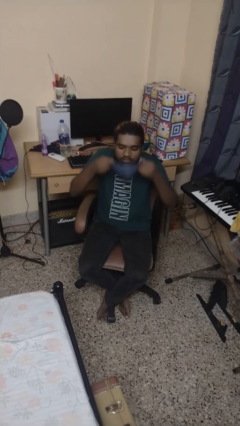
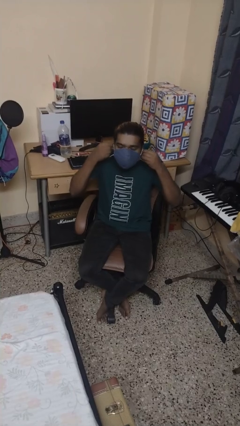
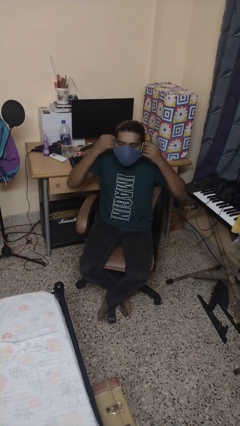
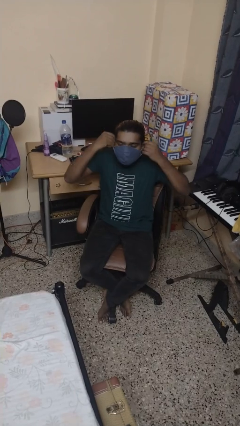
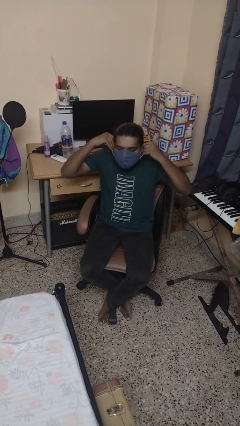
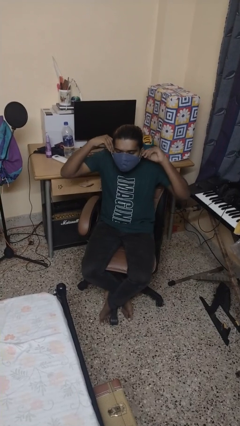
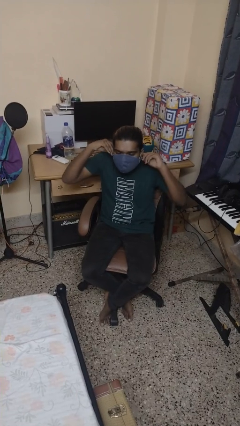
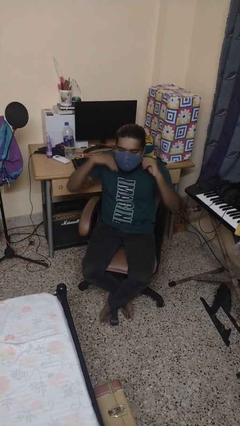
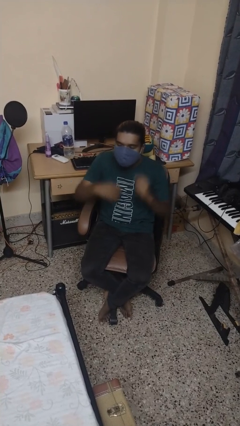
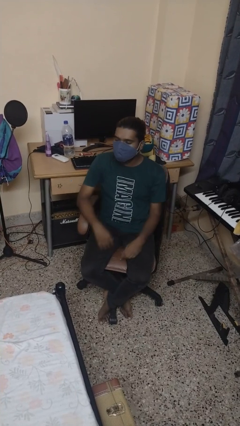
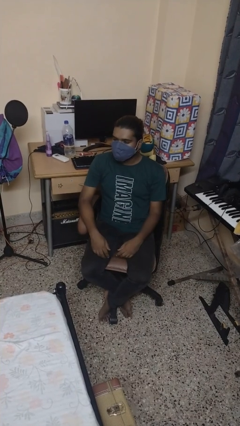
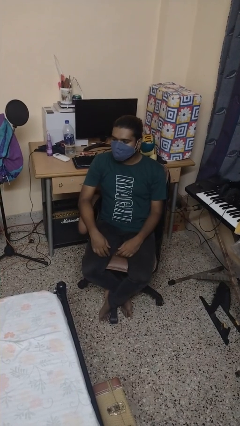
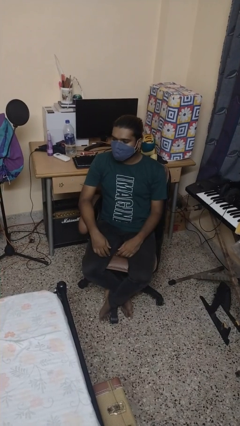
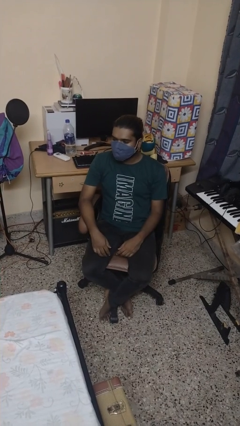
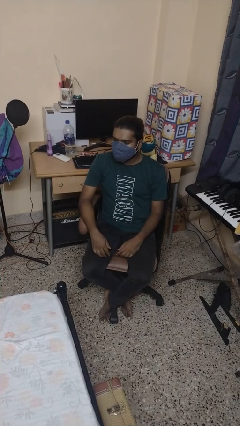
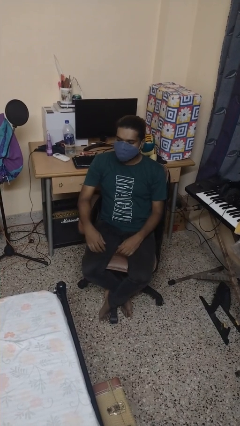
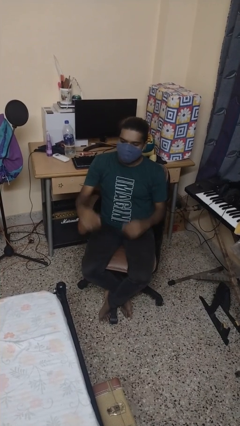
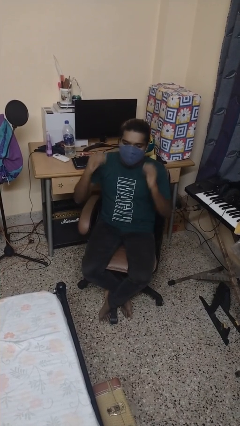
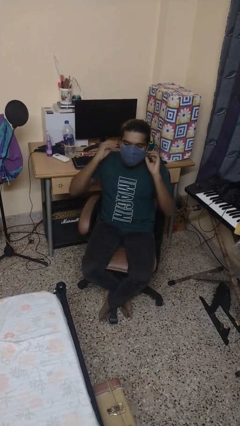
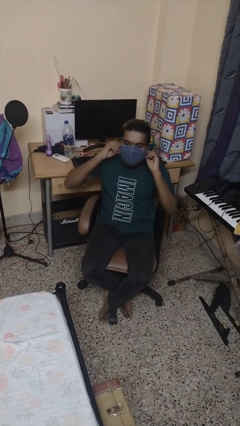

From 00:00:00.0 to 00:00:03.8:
person puts on facemask

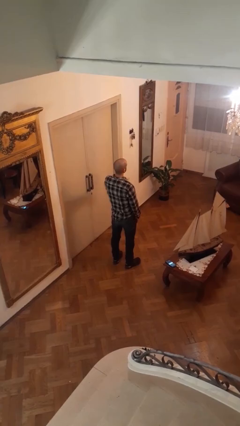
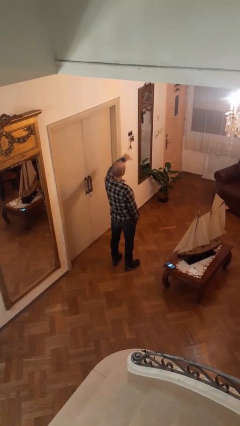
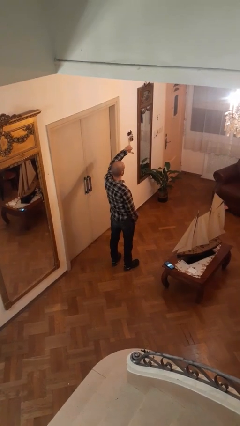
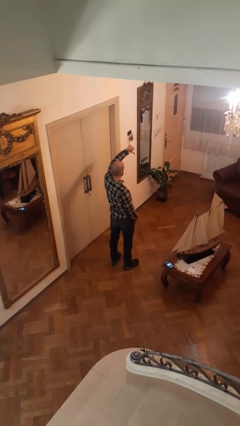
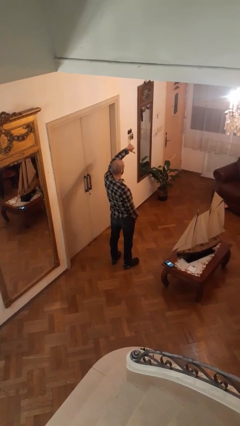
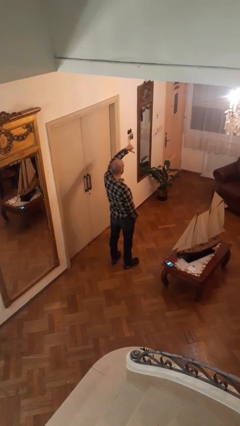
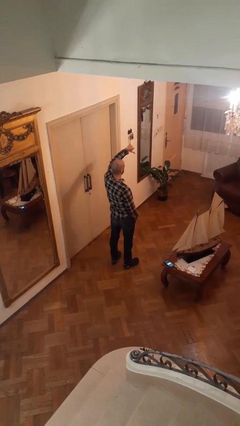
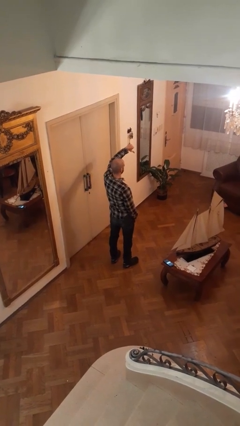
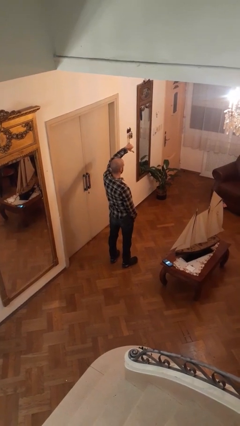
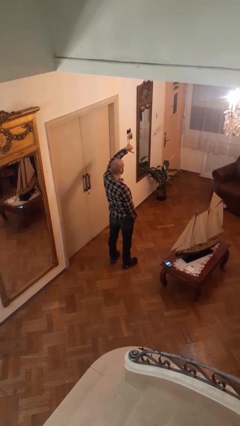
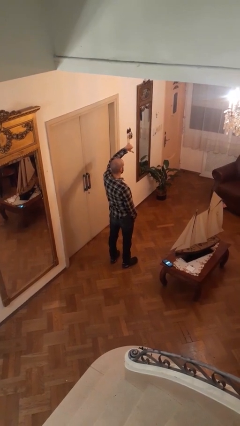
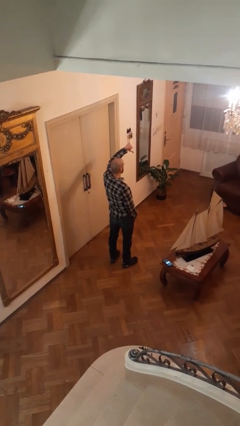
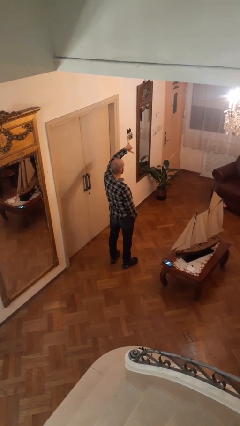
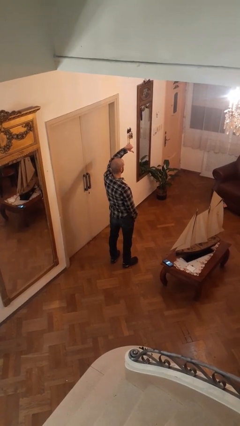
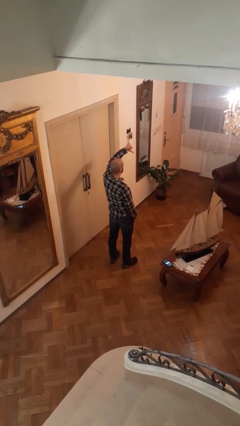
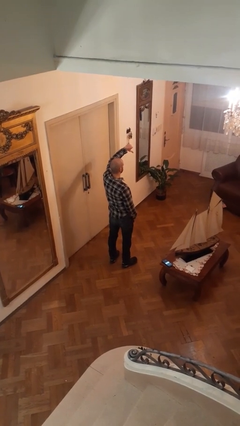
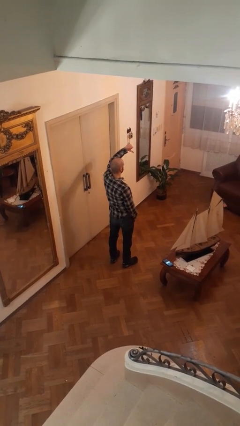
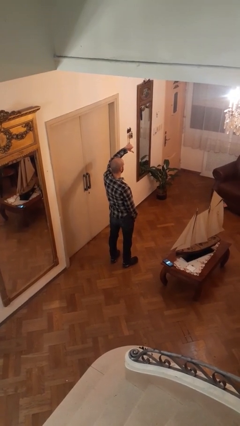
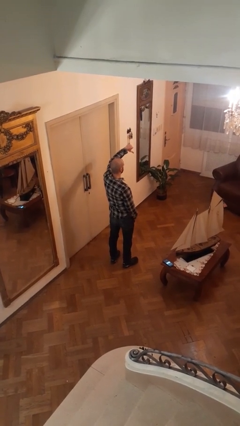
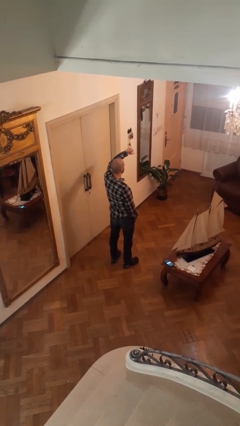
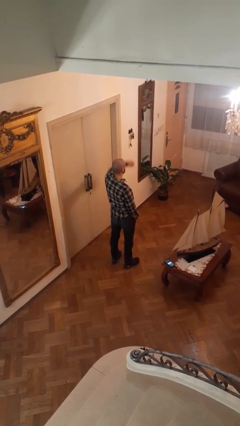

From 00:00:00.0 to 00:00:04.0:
person gestures thumbs down

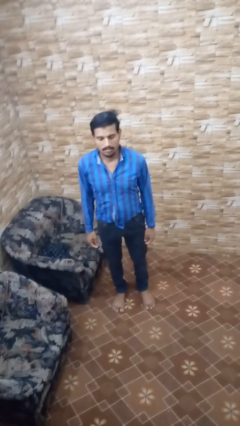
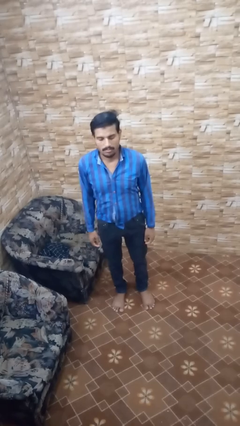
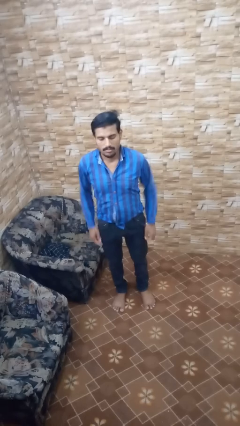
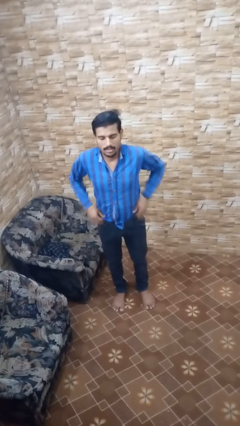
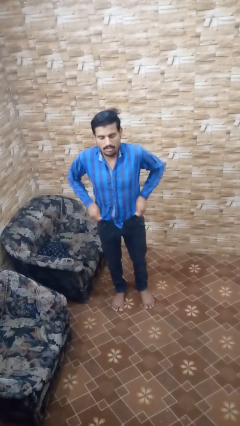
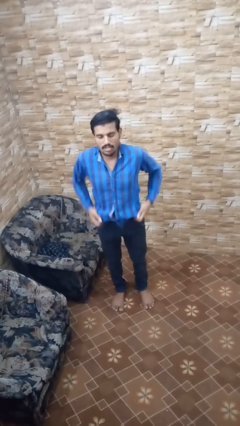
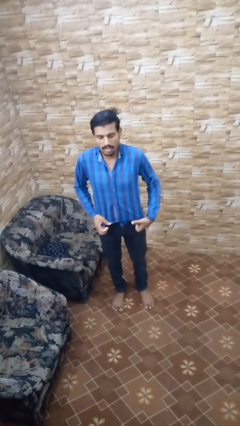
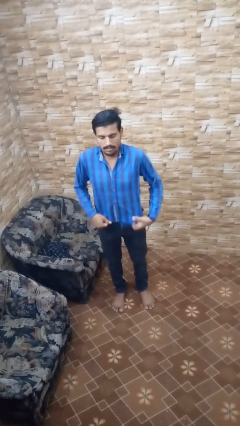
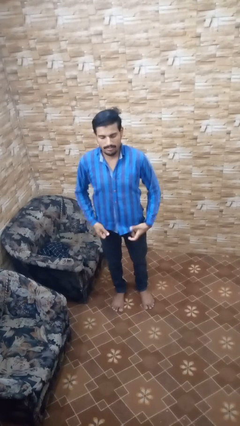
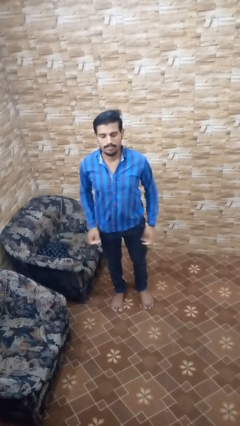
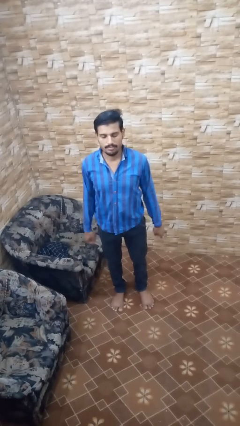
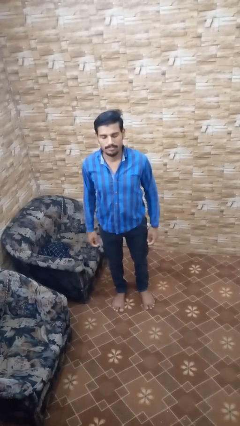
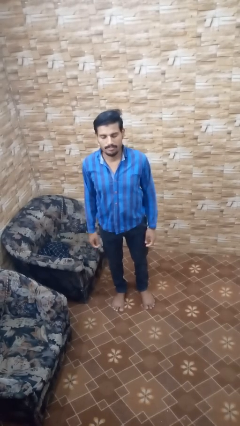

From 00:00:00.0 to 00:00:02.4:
person untucks shirt

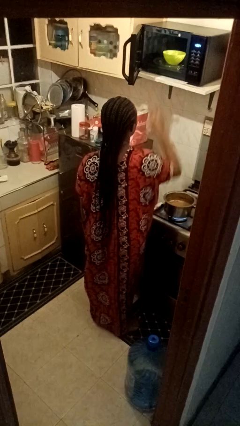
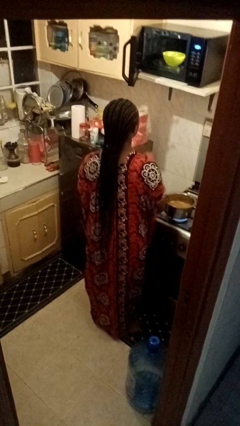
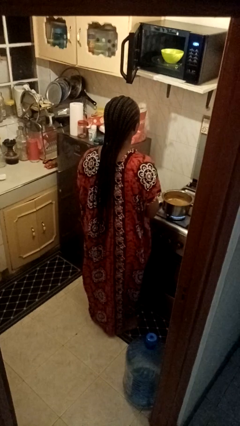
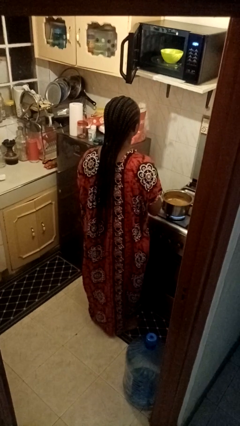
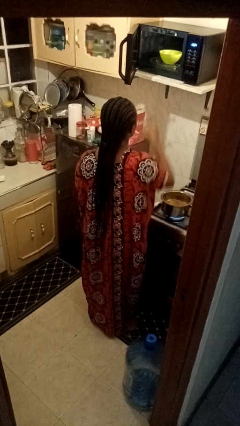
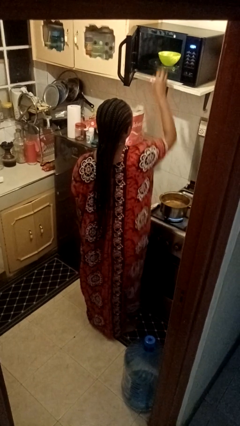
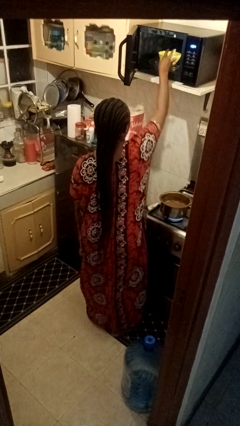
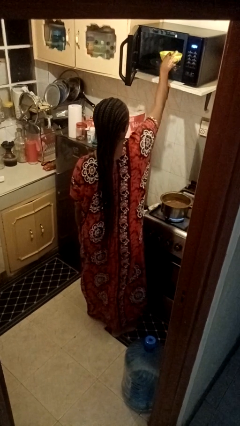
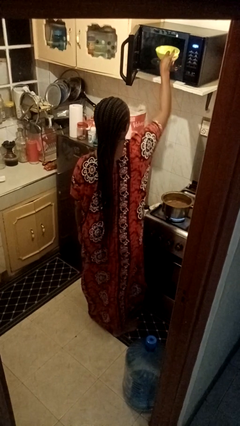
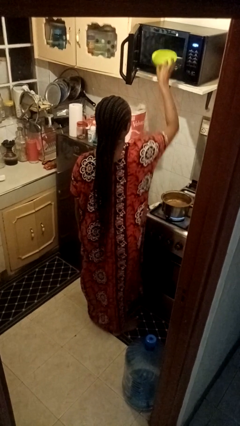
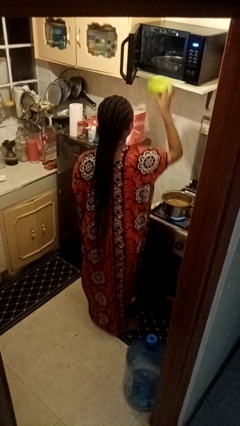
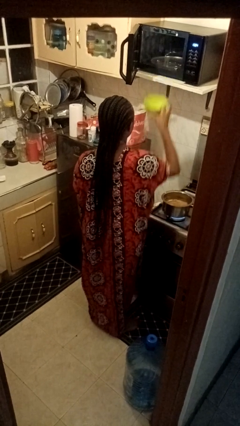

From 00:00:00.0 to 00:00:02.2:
person takes object from microwave

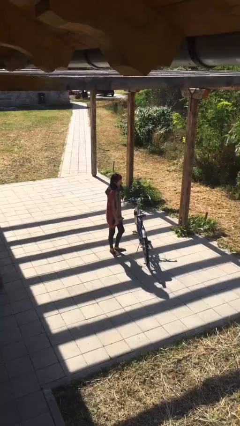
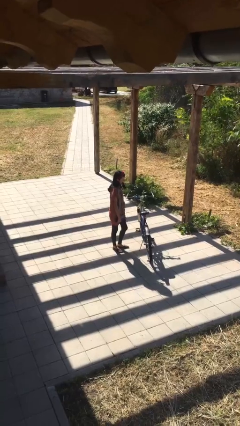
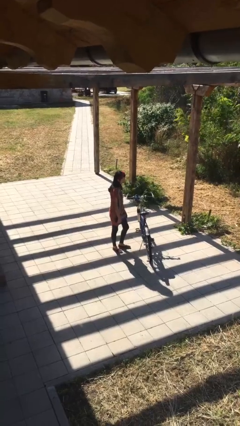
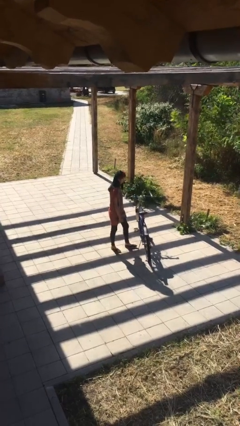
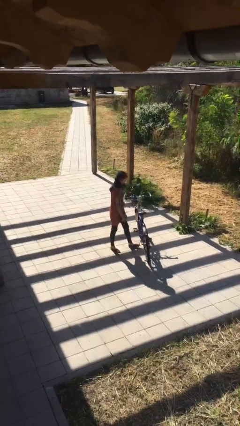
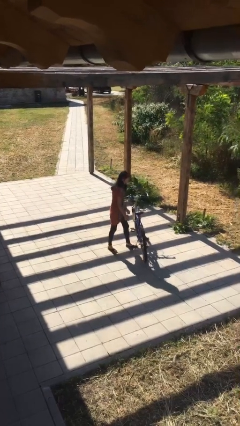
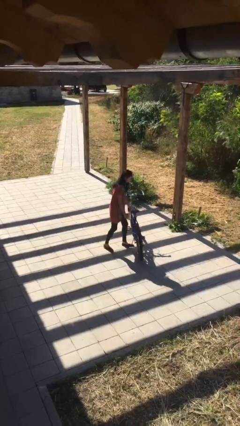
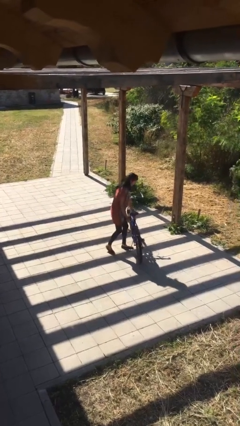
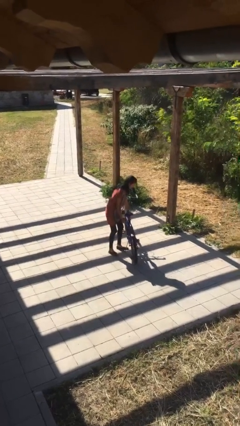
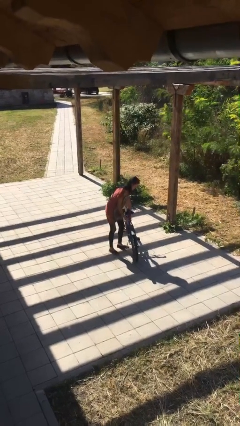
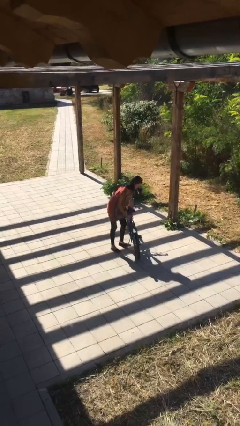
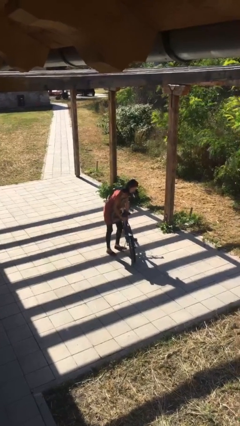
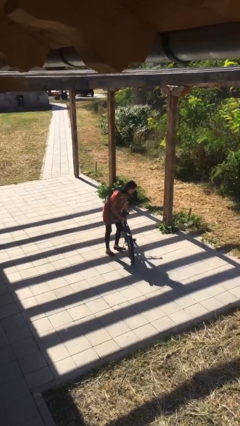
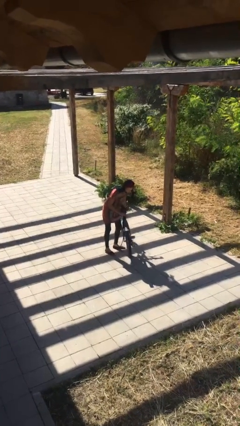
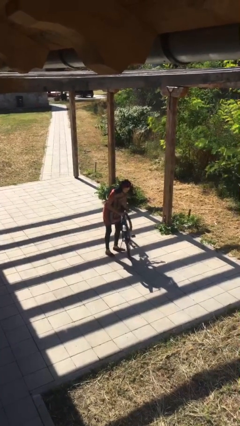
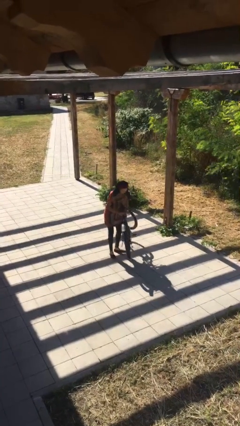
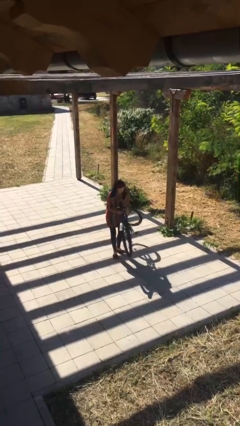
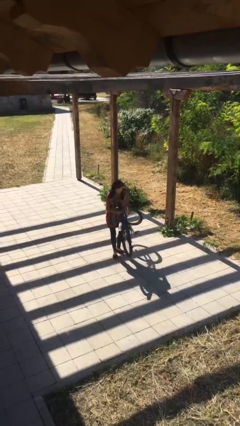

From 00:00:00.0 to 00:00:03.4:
person picks up object from floor

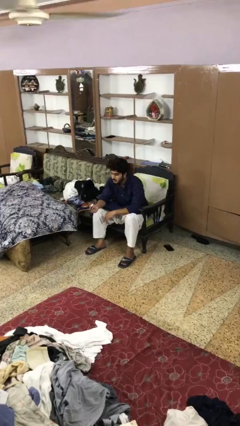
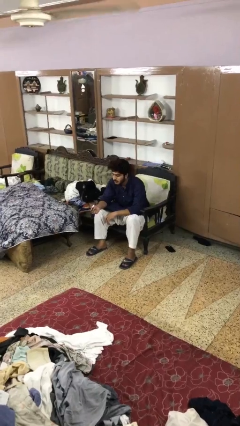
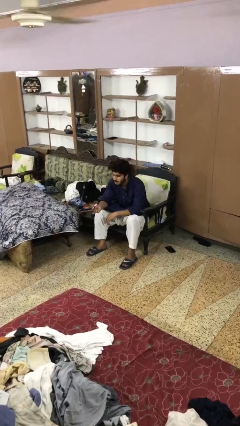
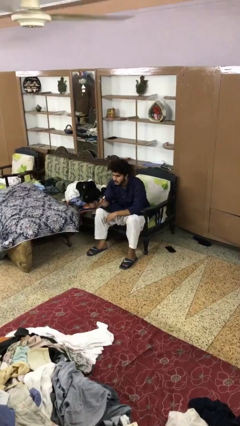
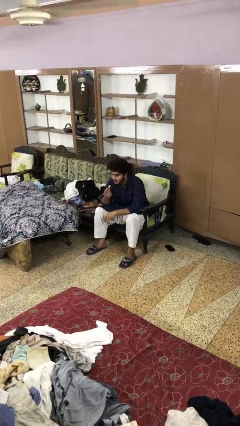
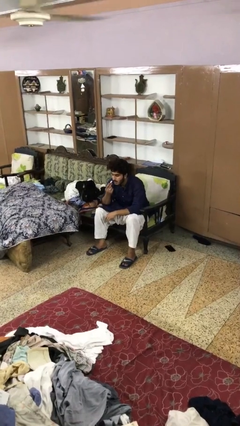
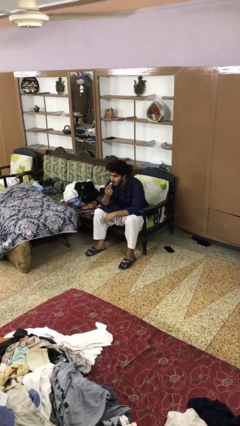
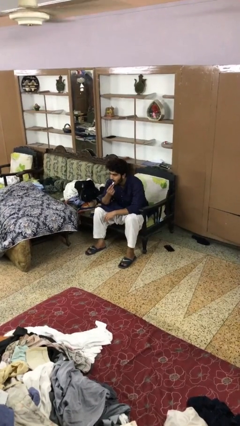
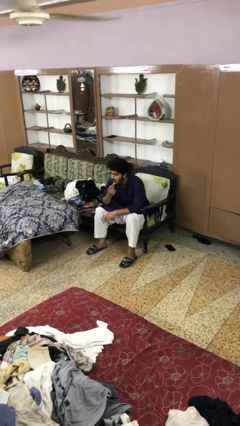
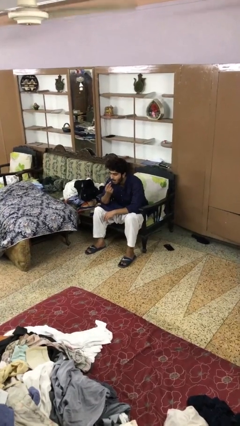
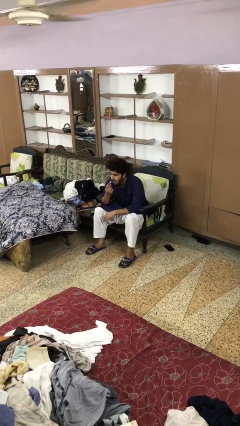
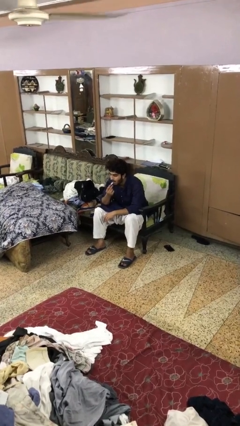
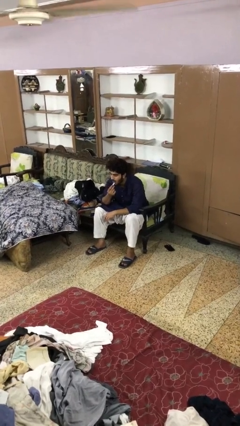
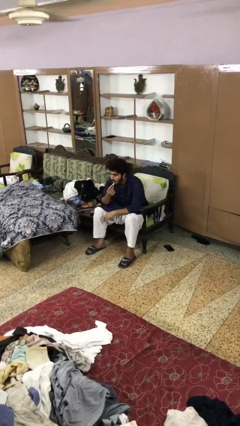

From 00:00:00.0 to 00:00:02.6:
person applies lip makeup
